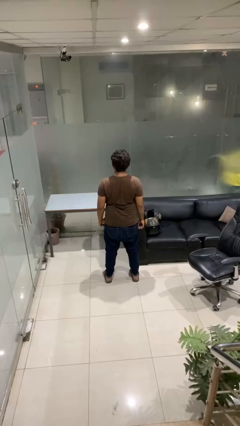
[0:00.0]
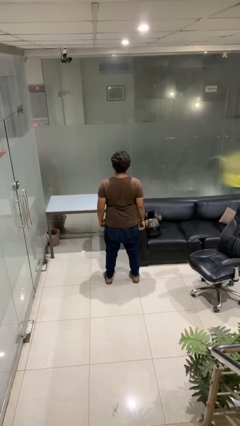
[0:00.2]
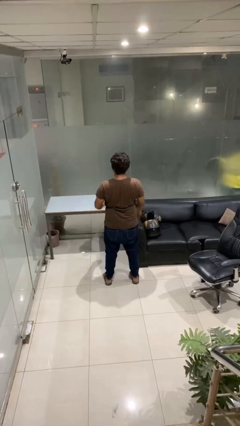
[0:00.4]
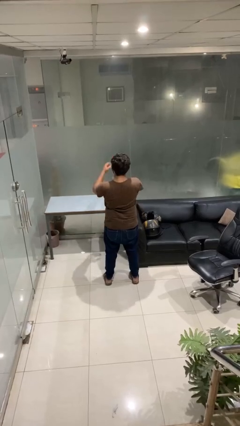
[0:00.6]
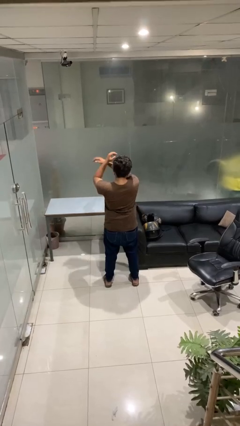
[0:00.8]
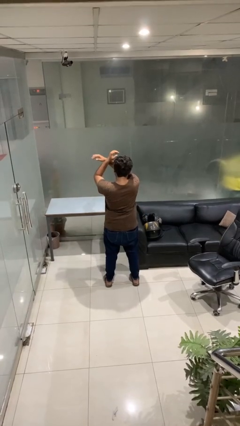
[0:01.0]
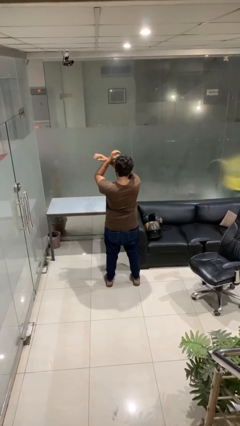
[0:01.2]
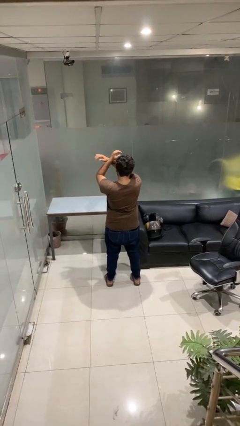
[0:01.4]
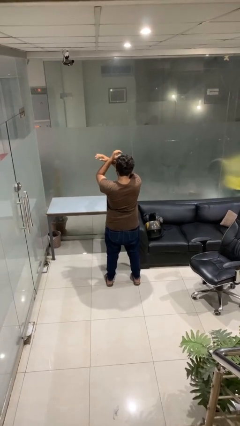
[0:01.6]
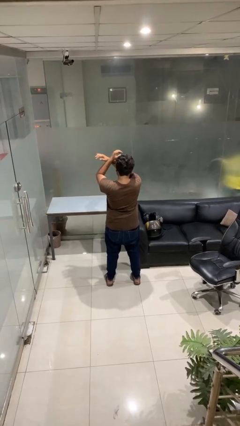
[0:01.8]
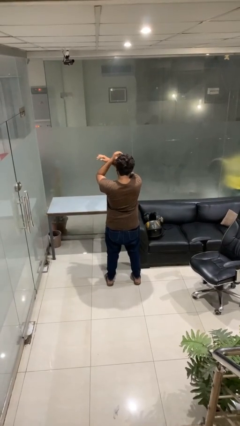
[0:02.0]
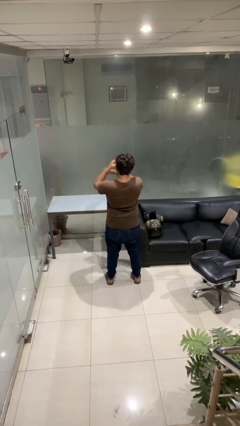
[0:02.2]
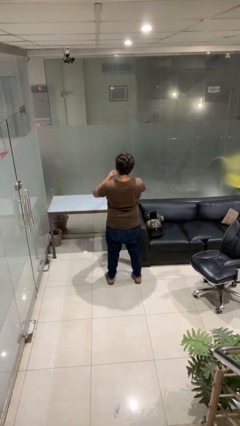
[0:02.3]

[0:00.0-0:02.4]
person gestures arms x

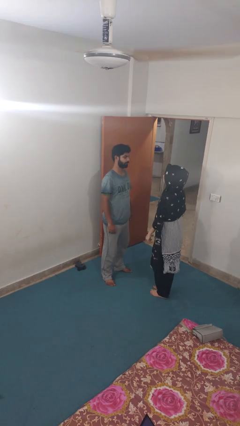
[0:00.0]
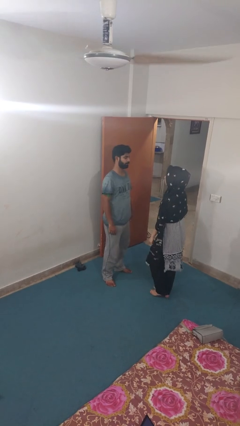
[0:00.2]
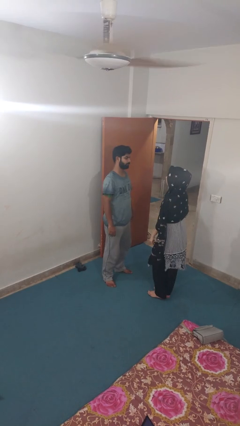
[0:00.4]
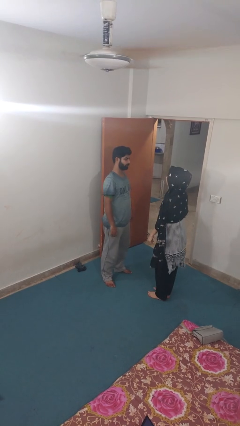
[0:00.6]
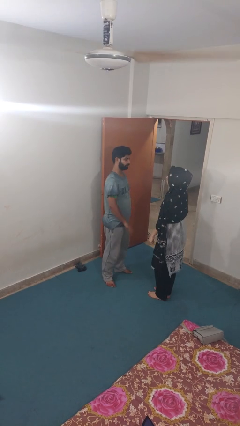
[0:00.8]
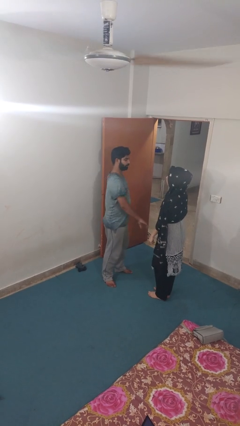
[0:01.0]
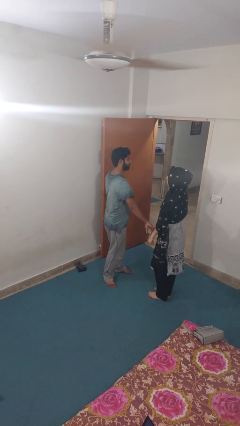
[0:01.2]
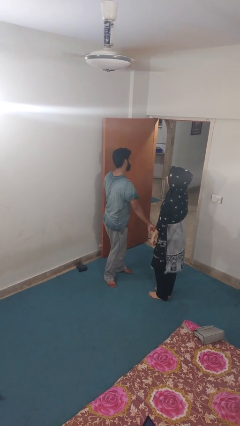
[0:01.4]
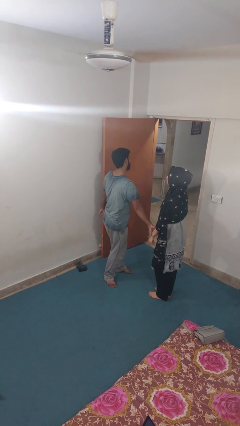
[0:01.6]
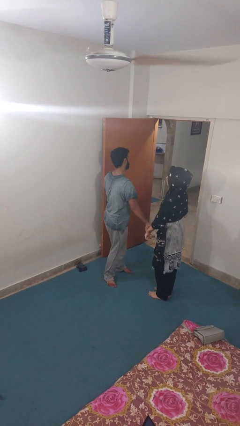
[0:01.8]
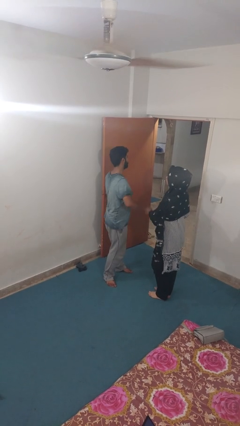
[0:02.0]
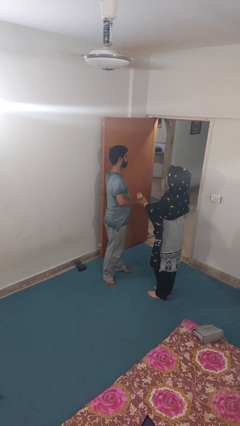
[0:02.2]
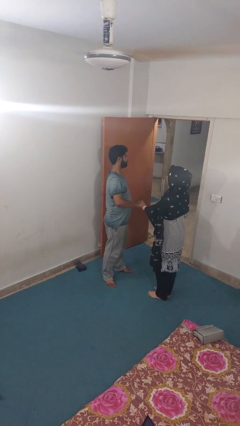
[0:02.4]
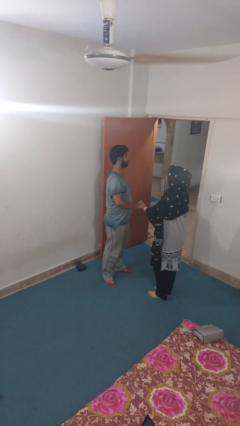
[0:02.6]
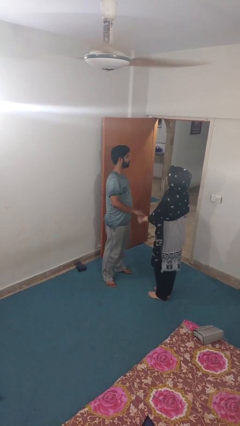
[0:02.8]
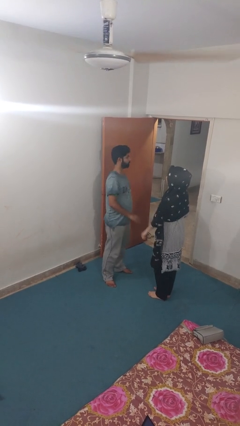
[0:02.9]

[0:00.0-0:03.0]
person grabs person by forearm

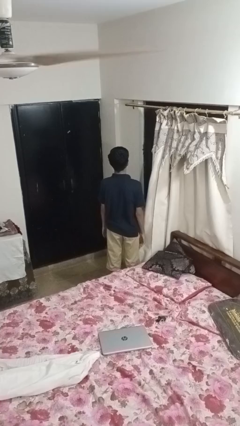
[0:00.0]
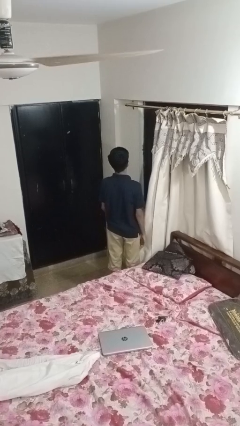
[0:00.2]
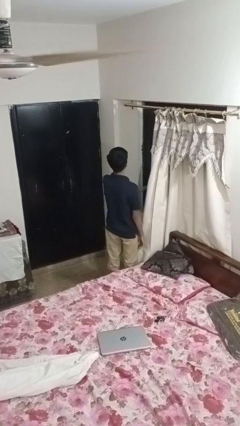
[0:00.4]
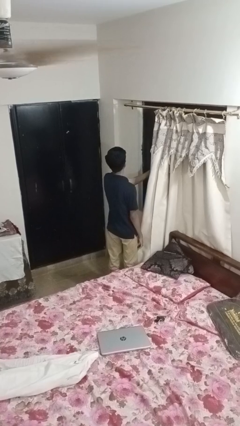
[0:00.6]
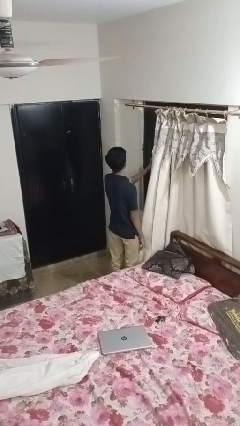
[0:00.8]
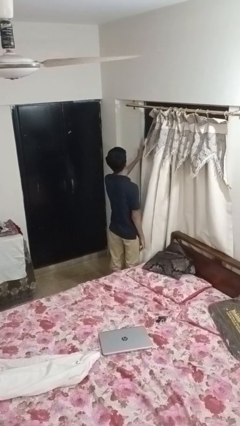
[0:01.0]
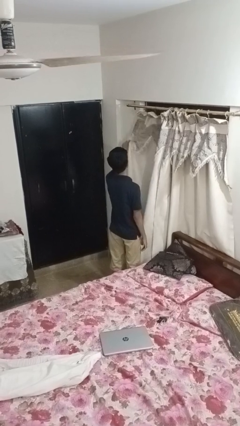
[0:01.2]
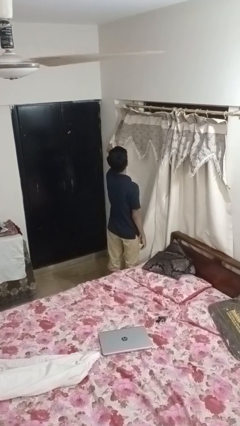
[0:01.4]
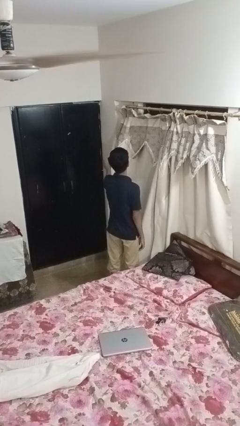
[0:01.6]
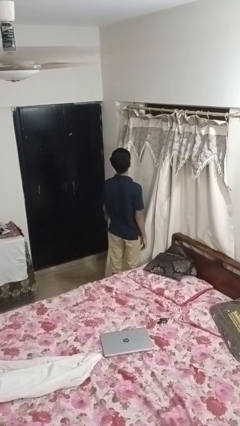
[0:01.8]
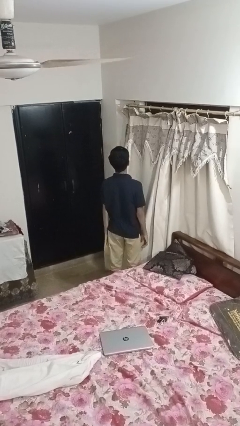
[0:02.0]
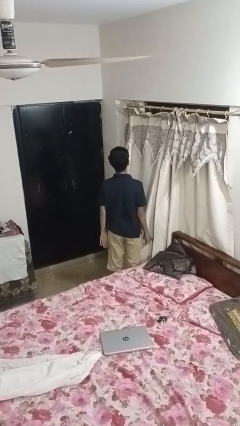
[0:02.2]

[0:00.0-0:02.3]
person closes curtains

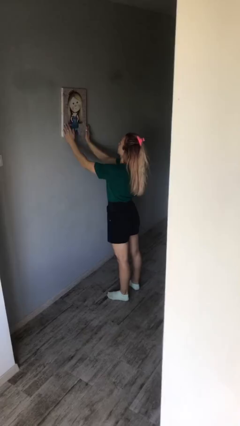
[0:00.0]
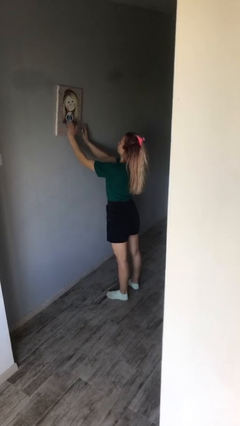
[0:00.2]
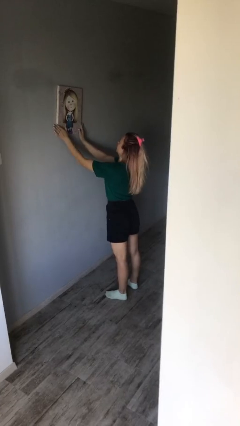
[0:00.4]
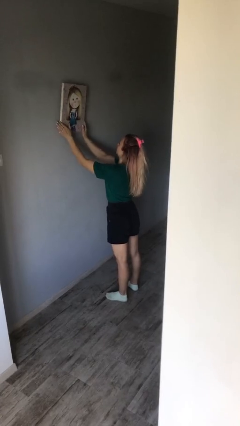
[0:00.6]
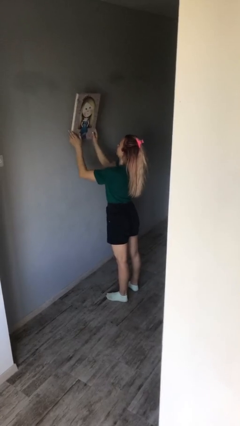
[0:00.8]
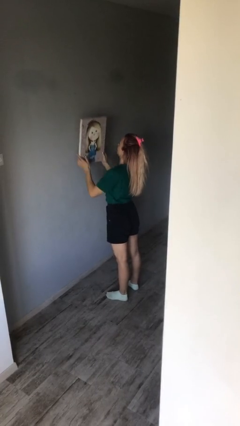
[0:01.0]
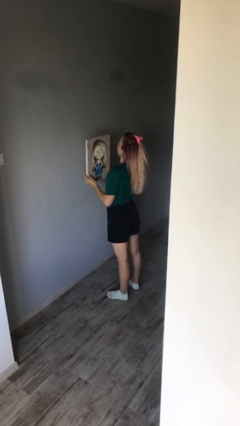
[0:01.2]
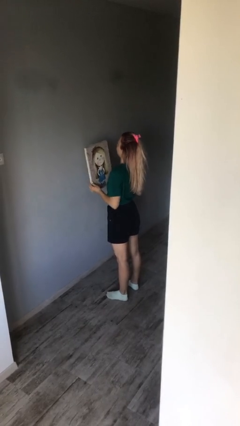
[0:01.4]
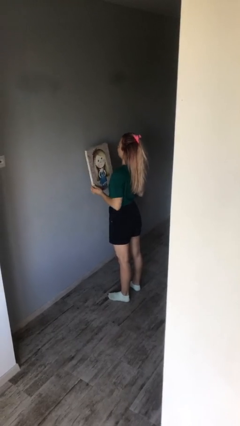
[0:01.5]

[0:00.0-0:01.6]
person takes down picture frame

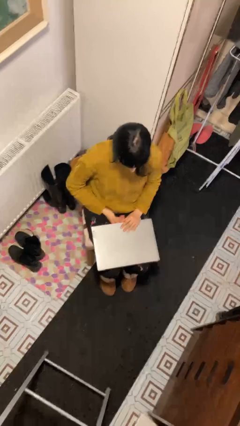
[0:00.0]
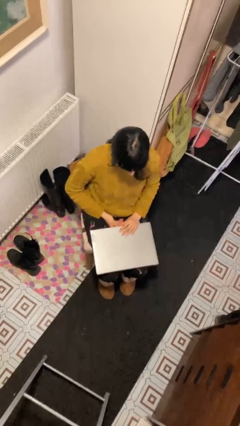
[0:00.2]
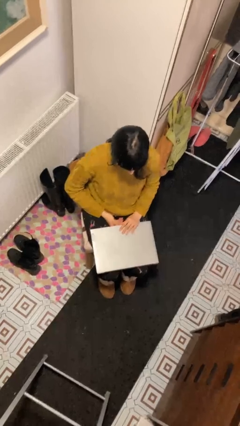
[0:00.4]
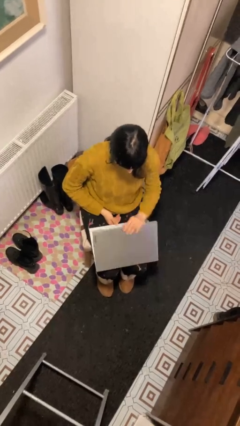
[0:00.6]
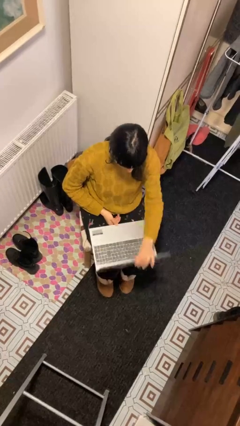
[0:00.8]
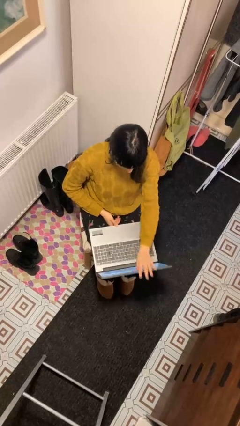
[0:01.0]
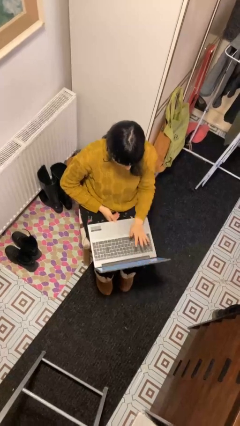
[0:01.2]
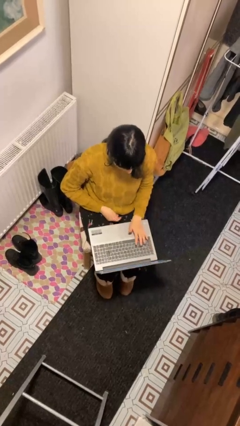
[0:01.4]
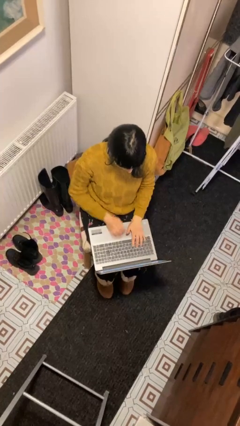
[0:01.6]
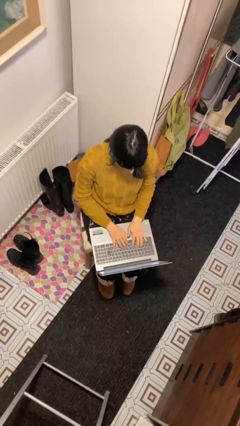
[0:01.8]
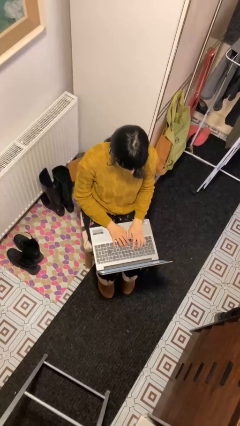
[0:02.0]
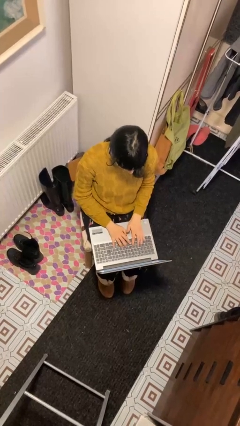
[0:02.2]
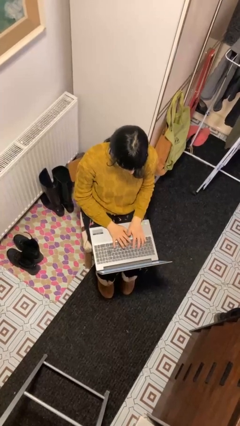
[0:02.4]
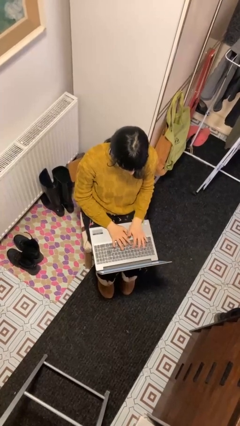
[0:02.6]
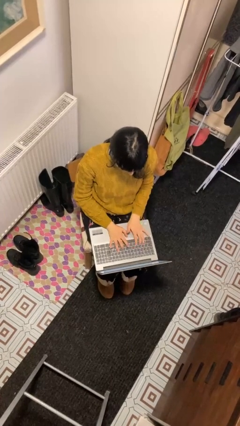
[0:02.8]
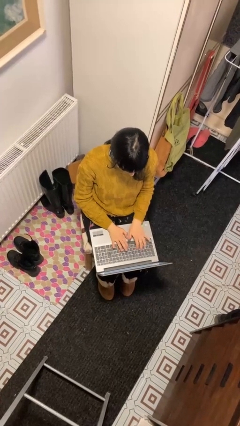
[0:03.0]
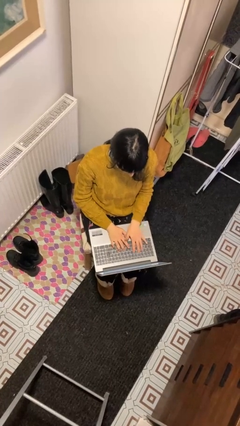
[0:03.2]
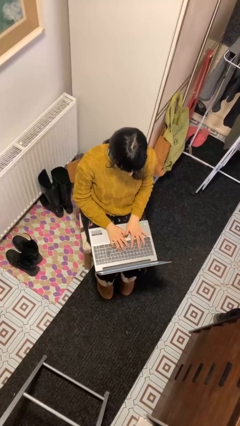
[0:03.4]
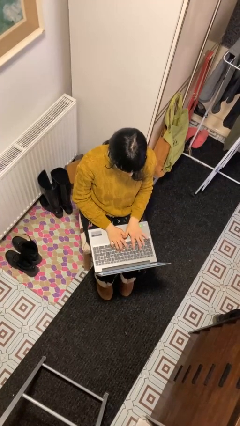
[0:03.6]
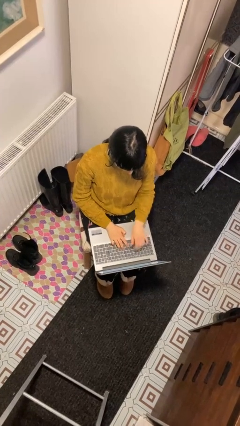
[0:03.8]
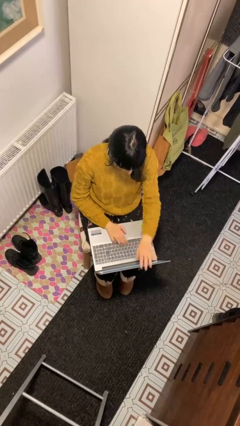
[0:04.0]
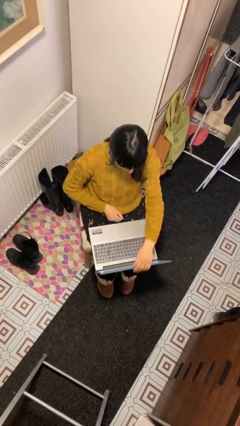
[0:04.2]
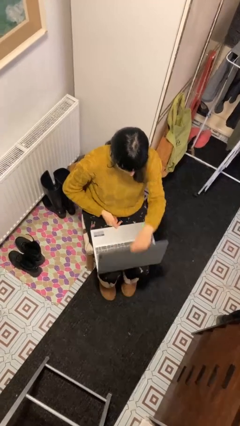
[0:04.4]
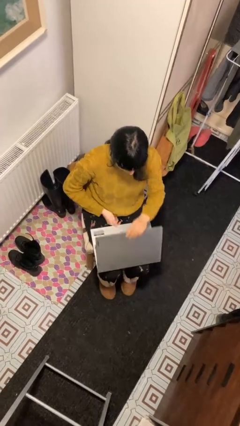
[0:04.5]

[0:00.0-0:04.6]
person interacts with laptop

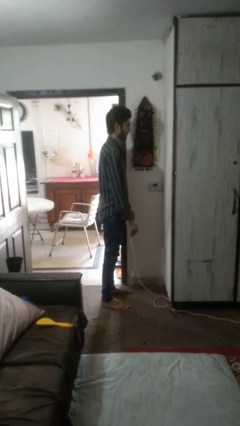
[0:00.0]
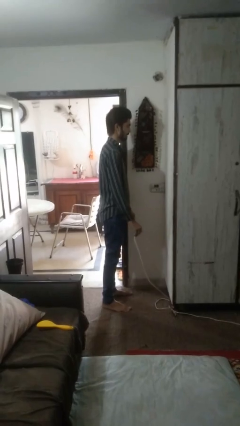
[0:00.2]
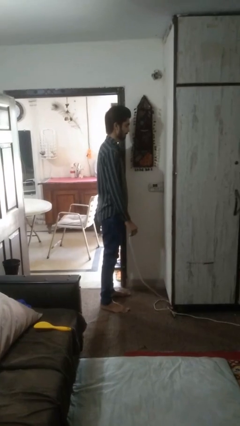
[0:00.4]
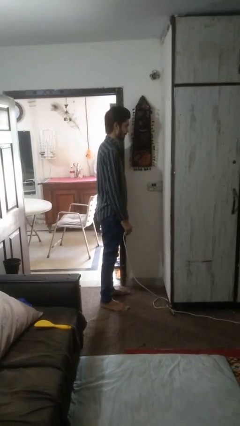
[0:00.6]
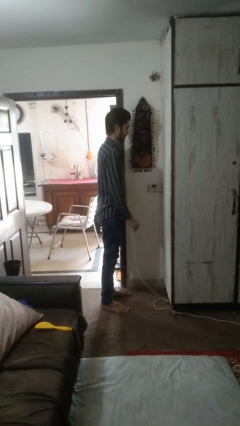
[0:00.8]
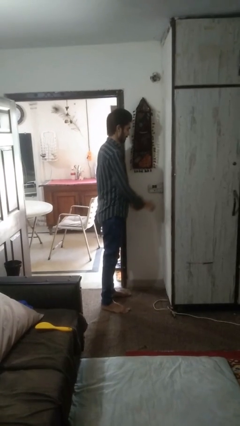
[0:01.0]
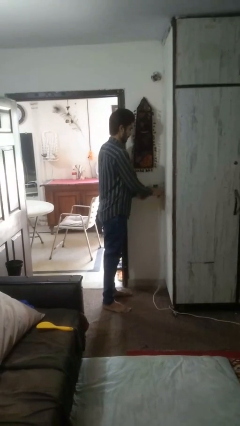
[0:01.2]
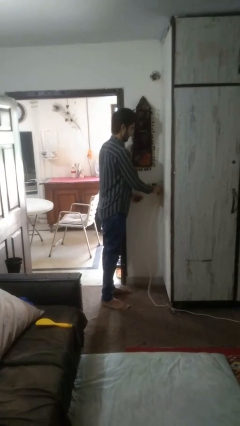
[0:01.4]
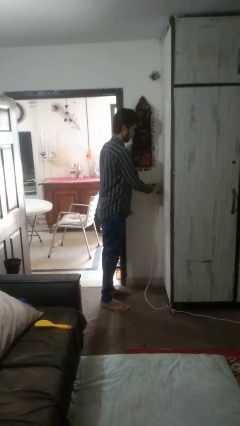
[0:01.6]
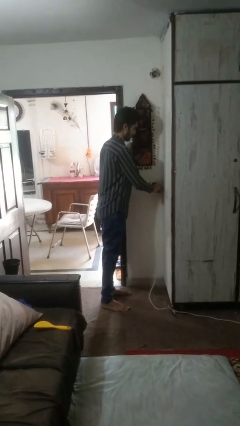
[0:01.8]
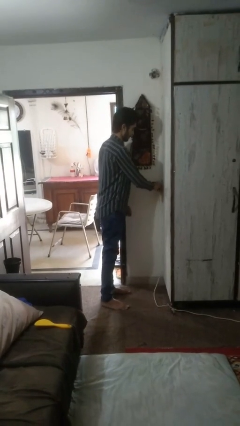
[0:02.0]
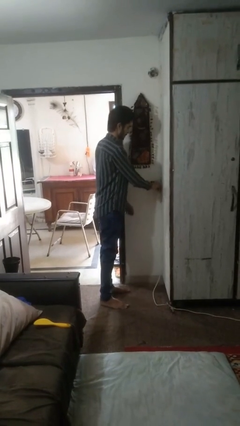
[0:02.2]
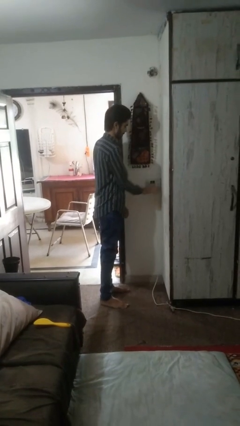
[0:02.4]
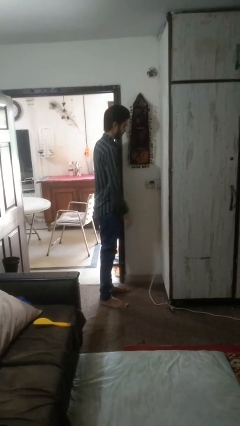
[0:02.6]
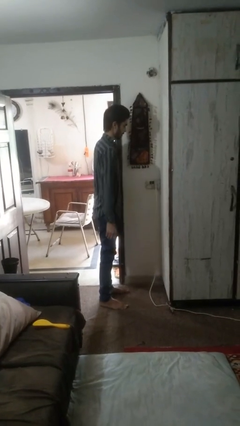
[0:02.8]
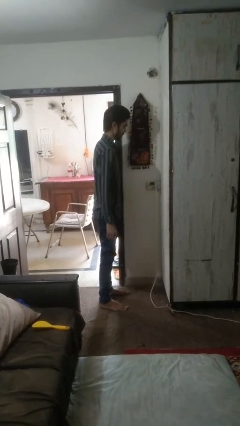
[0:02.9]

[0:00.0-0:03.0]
person plugs into electrical socket

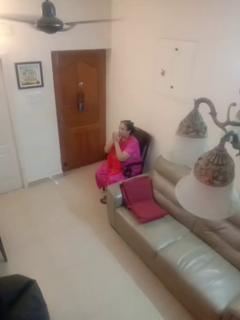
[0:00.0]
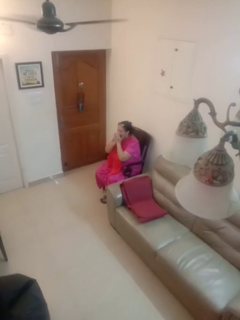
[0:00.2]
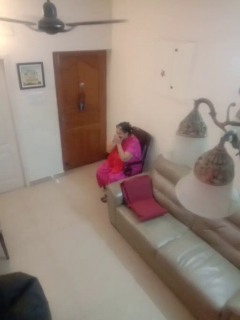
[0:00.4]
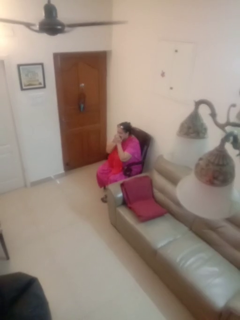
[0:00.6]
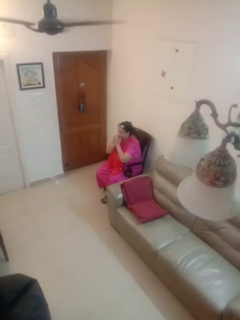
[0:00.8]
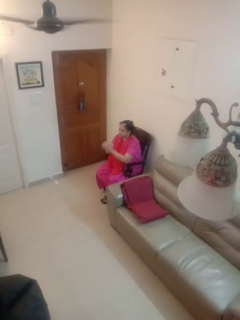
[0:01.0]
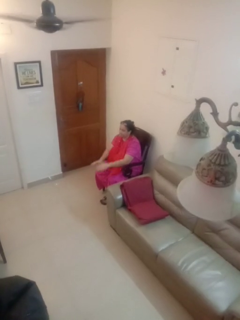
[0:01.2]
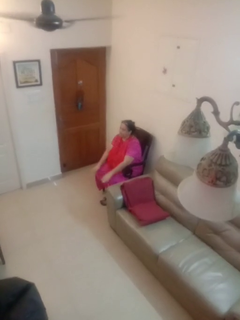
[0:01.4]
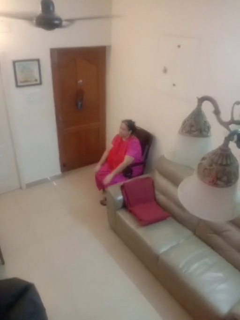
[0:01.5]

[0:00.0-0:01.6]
person sneezes into hand
